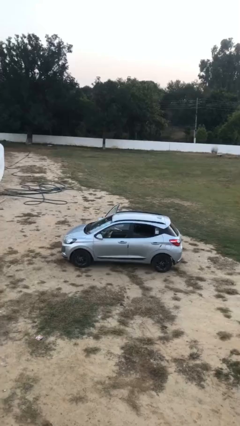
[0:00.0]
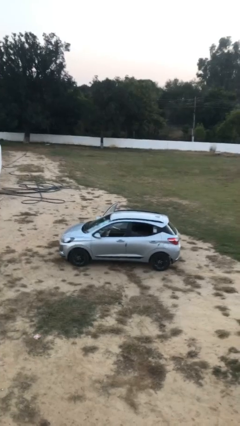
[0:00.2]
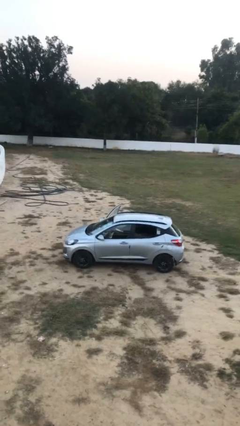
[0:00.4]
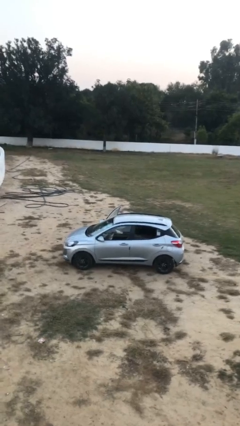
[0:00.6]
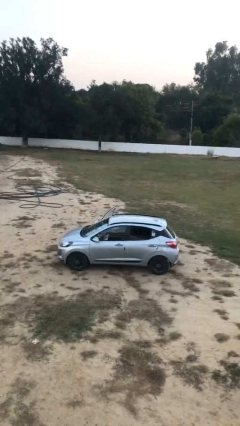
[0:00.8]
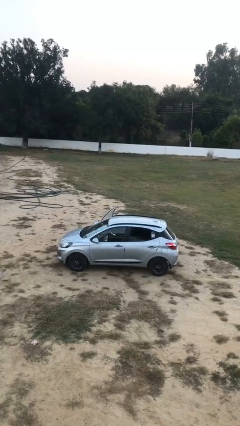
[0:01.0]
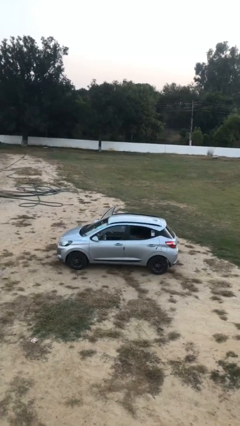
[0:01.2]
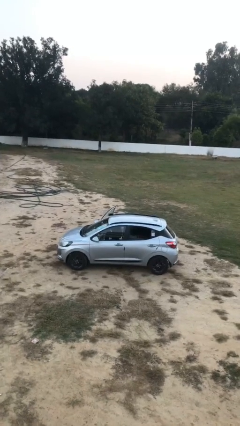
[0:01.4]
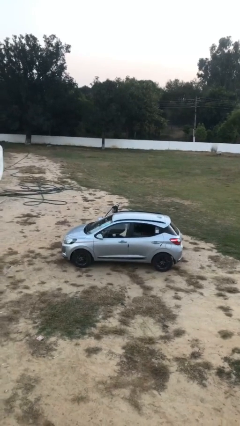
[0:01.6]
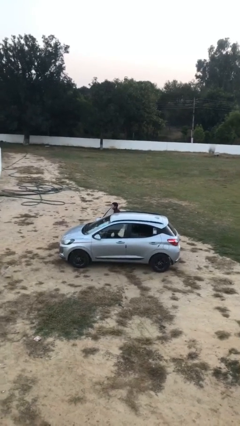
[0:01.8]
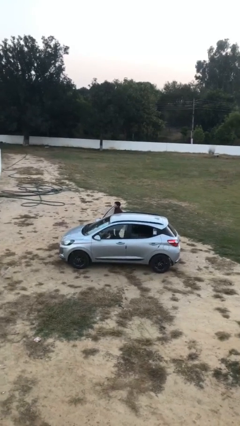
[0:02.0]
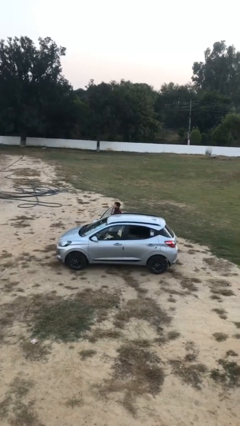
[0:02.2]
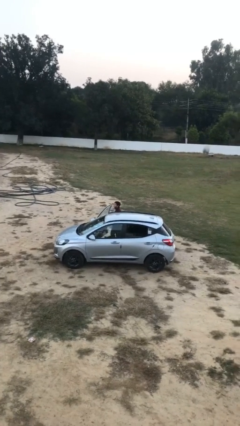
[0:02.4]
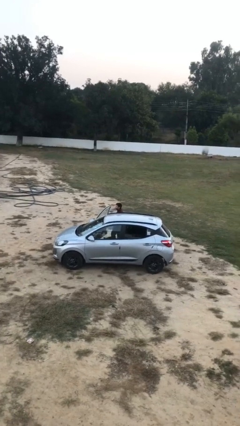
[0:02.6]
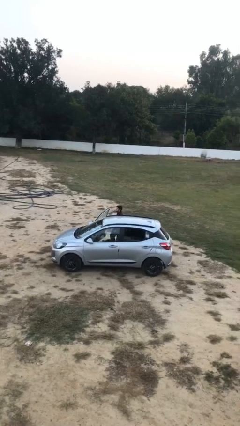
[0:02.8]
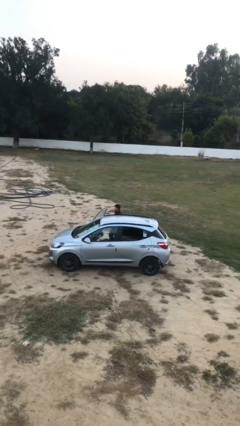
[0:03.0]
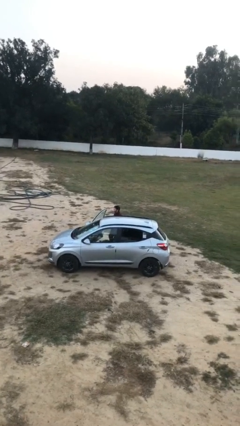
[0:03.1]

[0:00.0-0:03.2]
person exits car

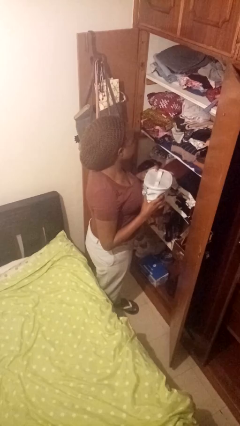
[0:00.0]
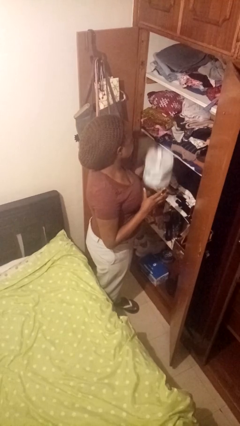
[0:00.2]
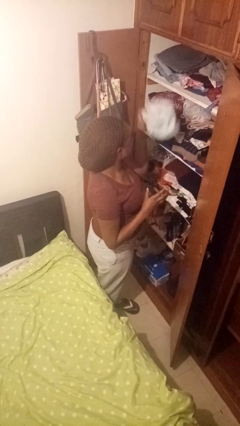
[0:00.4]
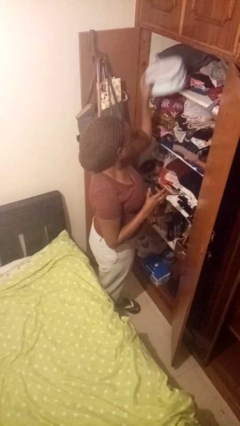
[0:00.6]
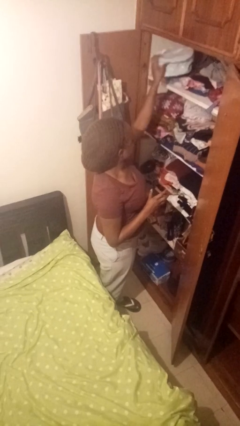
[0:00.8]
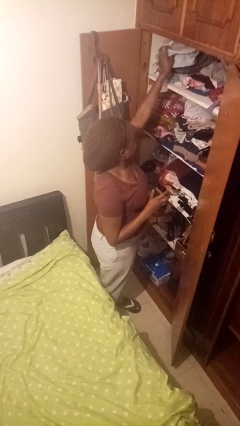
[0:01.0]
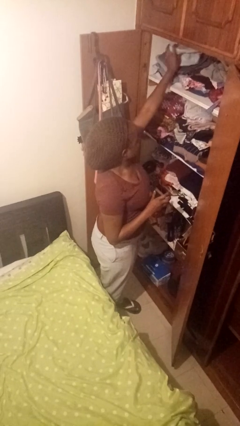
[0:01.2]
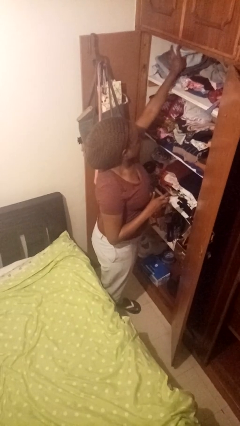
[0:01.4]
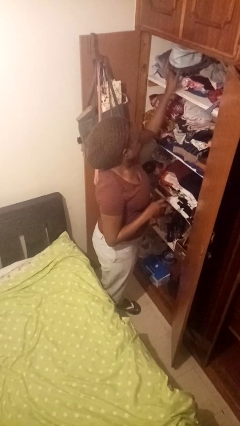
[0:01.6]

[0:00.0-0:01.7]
person puts down object on shelf

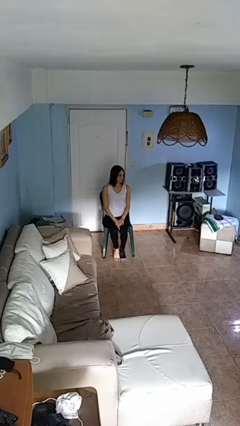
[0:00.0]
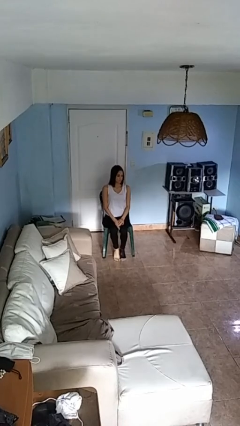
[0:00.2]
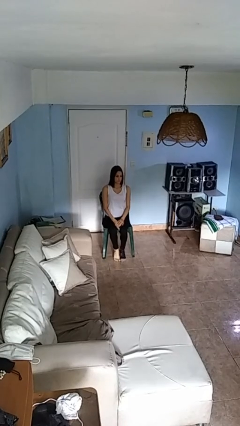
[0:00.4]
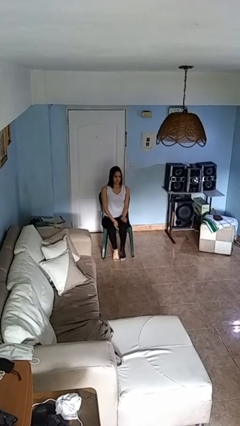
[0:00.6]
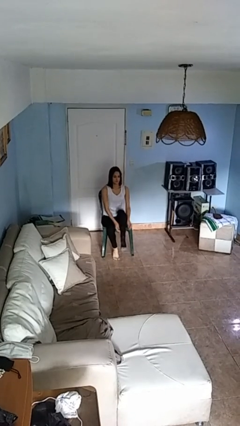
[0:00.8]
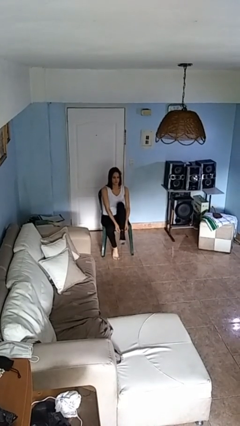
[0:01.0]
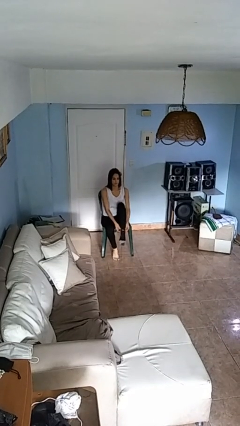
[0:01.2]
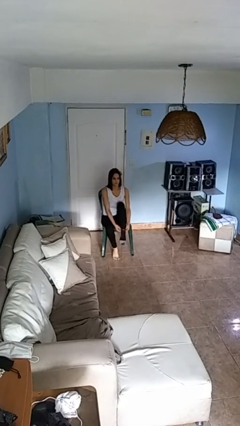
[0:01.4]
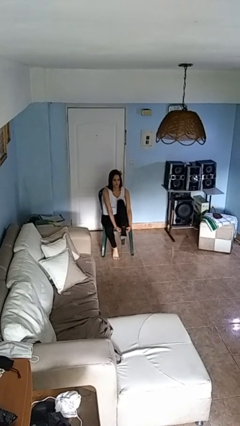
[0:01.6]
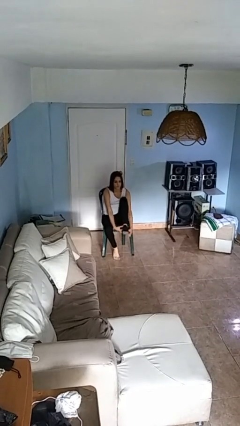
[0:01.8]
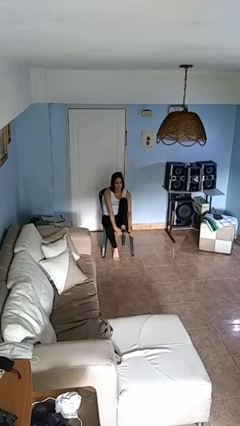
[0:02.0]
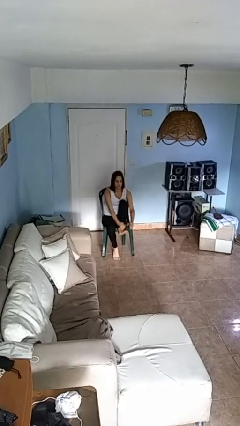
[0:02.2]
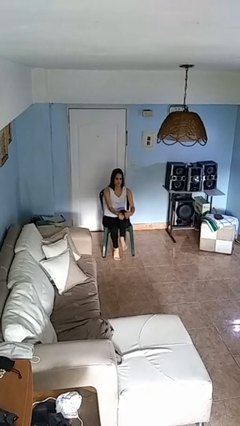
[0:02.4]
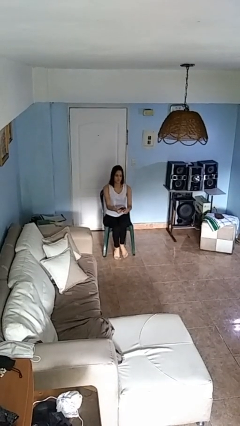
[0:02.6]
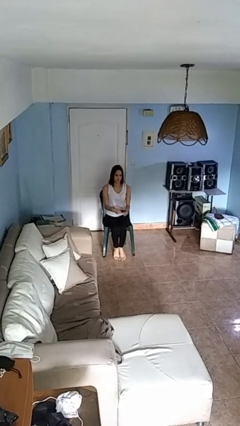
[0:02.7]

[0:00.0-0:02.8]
person takes off socks

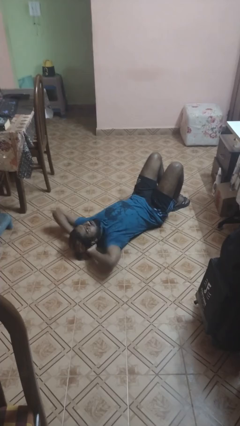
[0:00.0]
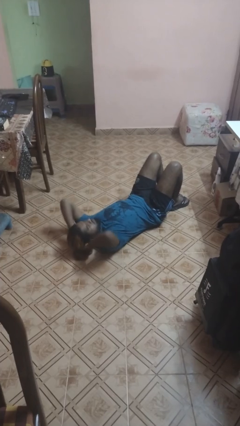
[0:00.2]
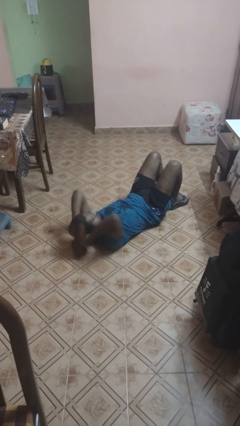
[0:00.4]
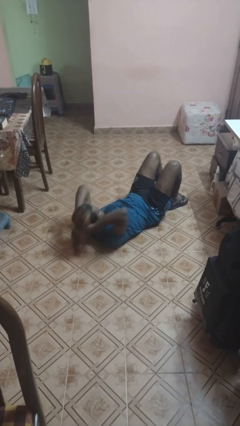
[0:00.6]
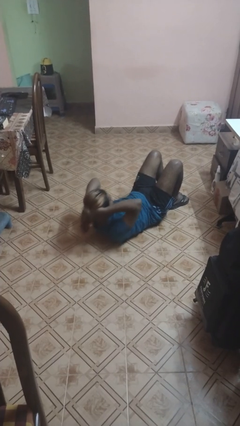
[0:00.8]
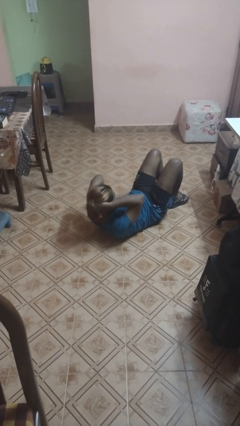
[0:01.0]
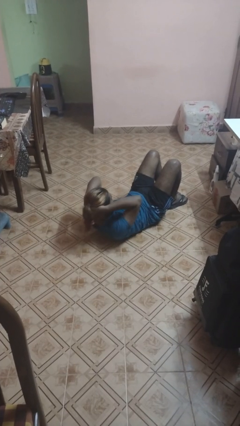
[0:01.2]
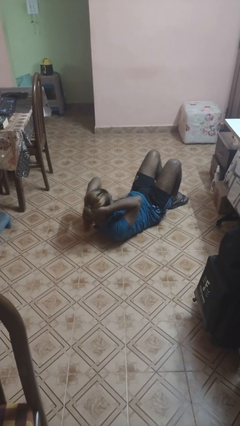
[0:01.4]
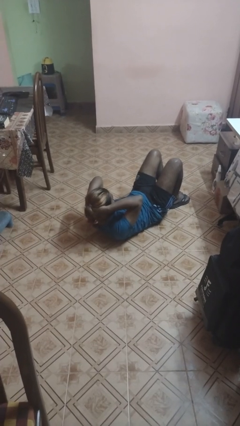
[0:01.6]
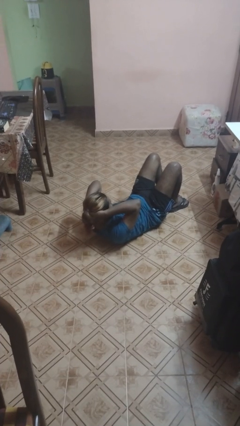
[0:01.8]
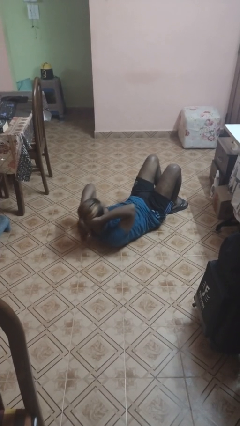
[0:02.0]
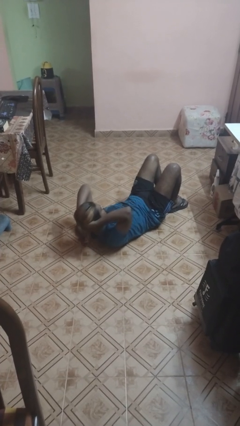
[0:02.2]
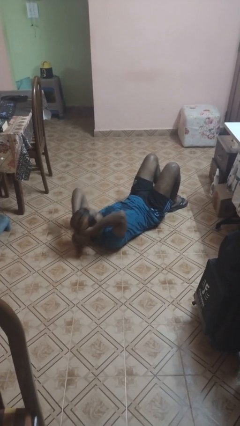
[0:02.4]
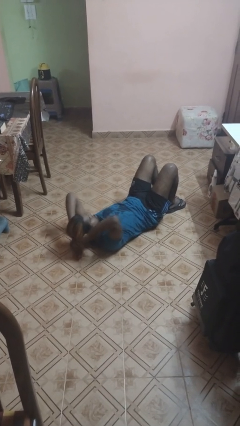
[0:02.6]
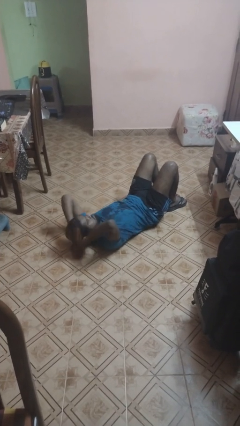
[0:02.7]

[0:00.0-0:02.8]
person exercises with situp

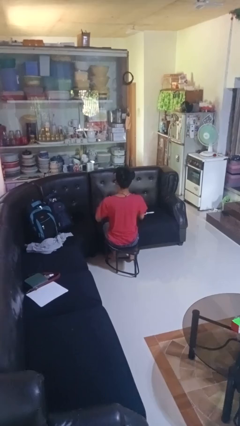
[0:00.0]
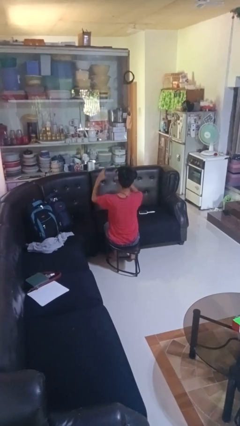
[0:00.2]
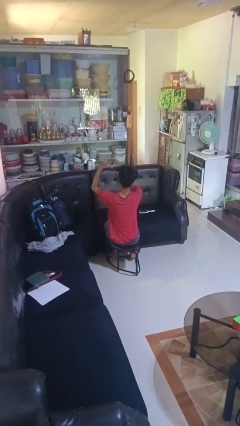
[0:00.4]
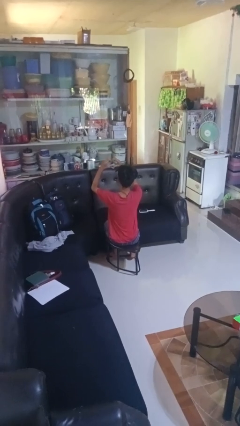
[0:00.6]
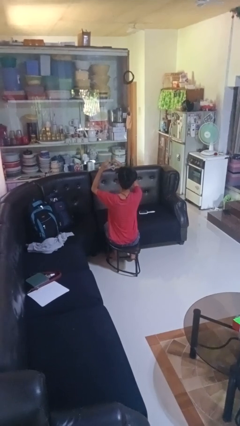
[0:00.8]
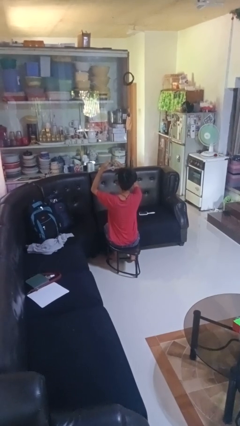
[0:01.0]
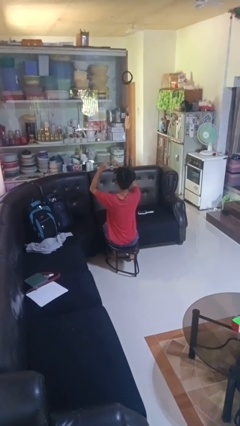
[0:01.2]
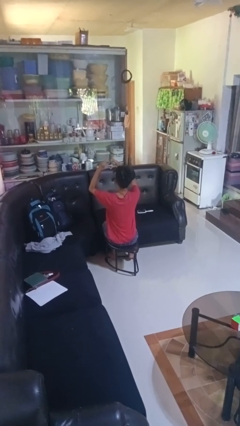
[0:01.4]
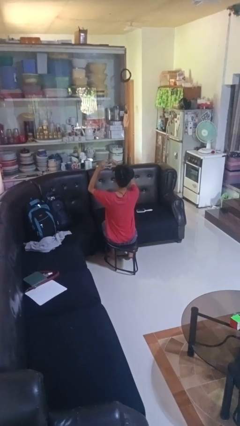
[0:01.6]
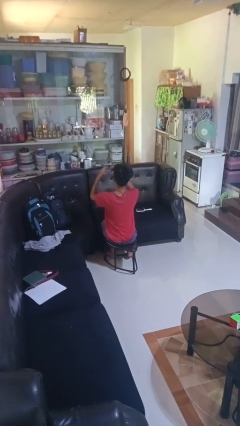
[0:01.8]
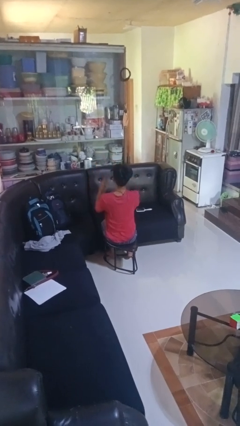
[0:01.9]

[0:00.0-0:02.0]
person gestures heart

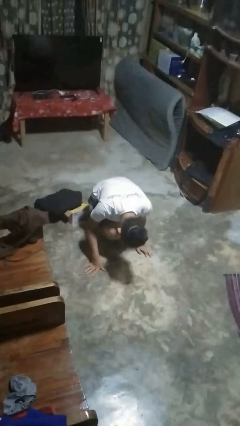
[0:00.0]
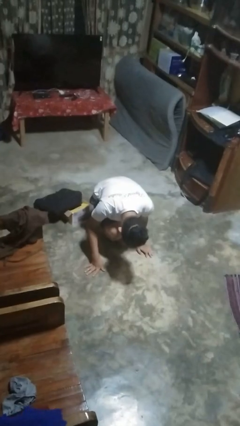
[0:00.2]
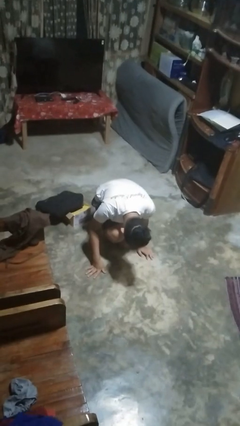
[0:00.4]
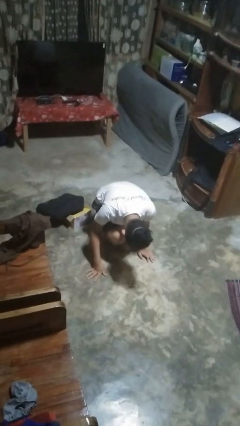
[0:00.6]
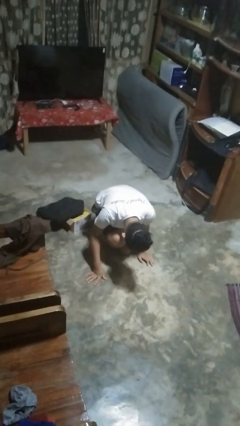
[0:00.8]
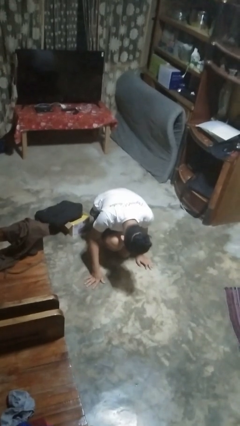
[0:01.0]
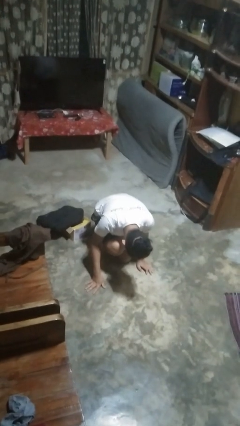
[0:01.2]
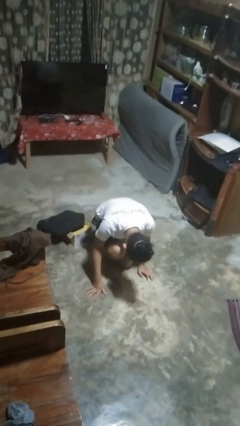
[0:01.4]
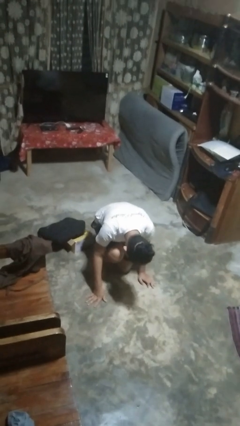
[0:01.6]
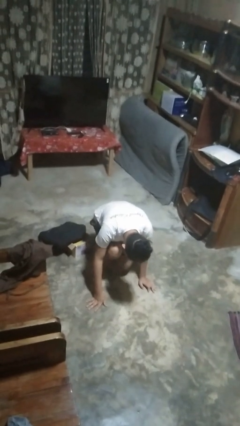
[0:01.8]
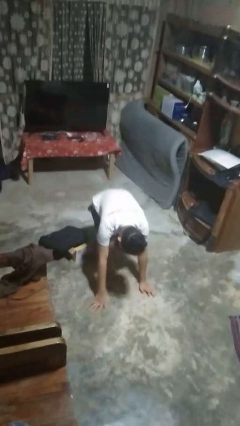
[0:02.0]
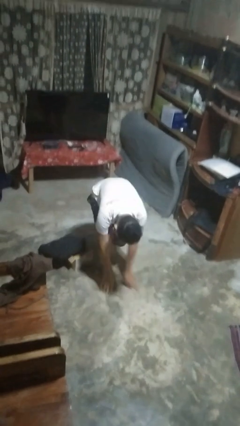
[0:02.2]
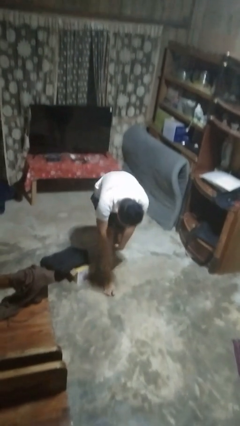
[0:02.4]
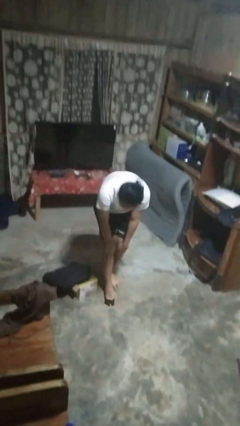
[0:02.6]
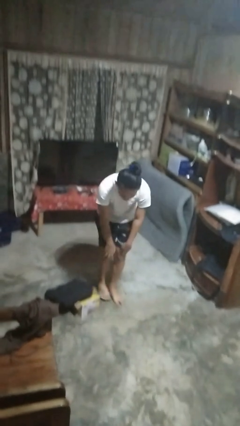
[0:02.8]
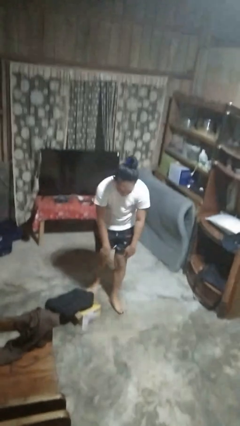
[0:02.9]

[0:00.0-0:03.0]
person stands up from floor

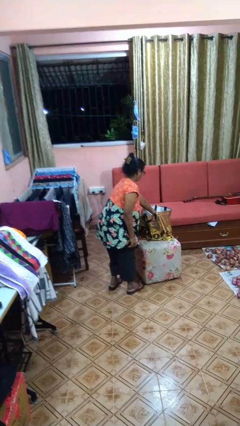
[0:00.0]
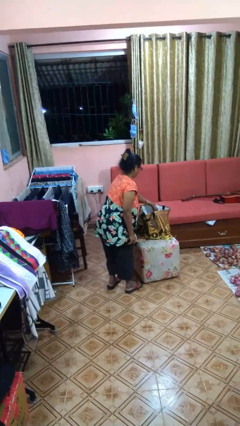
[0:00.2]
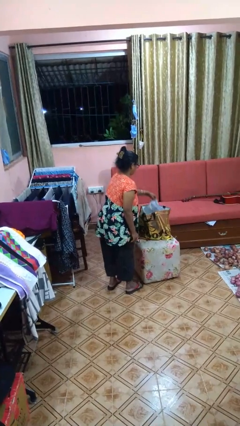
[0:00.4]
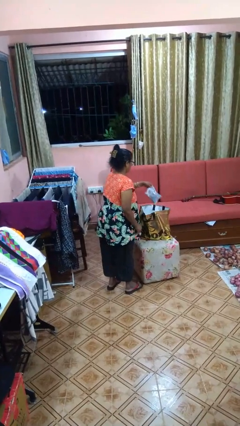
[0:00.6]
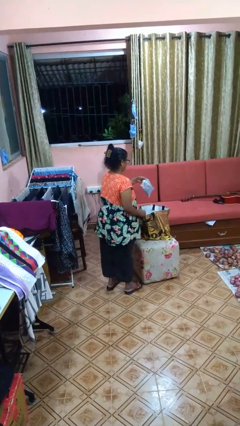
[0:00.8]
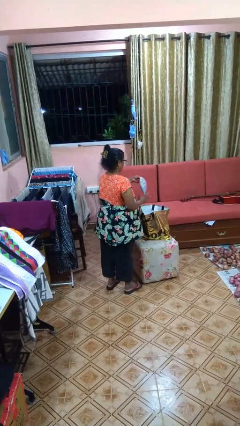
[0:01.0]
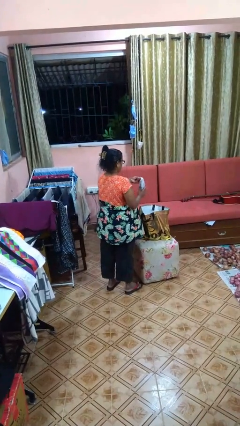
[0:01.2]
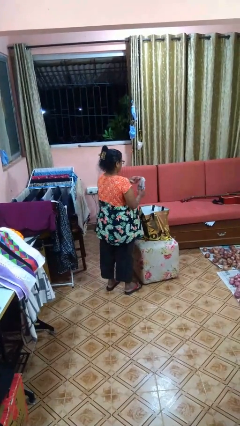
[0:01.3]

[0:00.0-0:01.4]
person takes object from bag

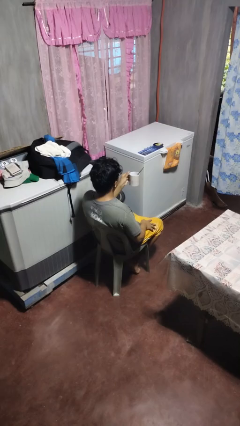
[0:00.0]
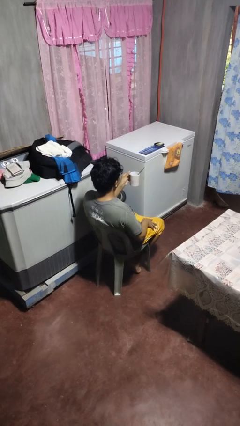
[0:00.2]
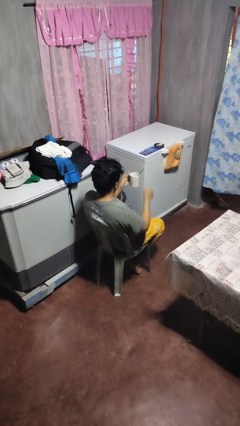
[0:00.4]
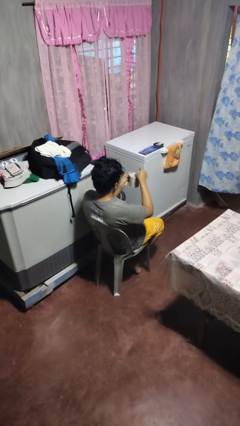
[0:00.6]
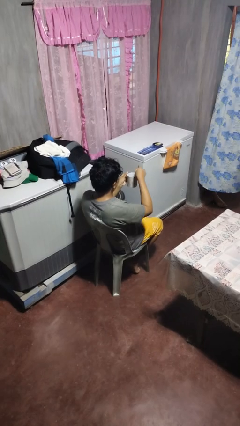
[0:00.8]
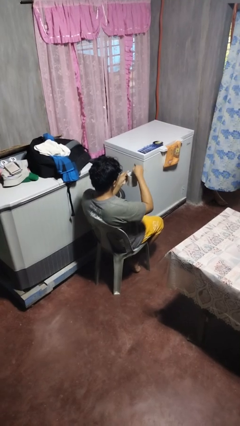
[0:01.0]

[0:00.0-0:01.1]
person stirs mug
